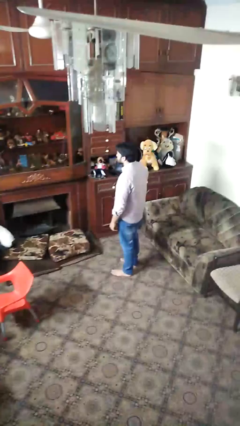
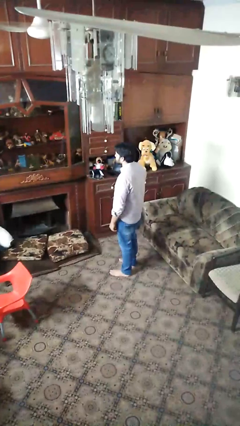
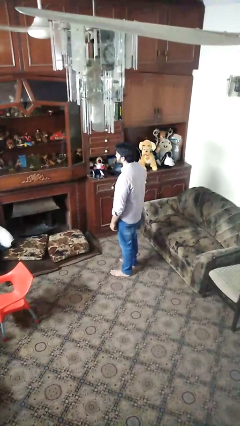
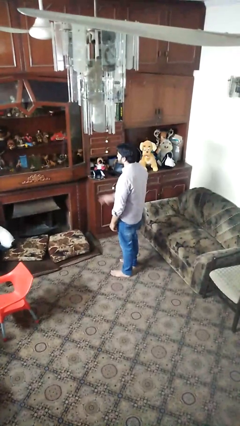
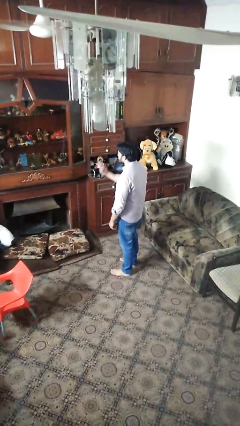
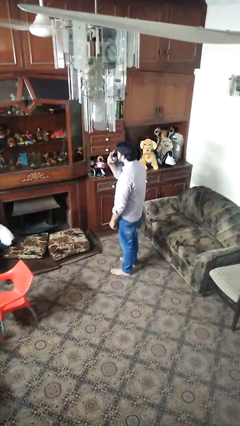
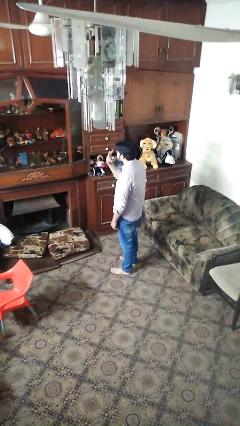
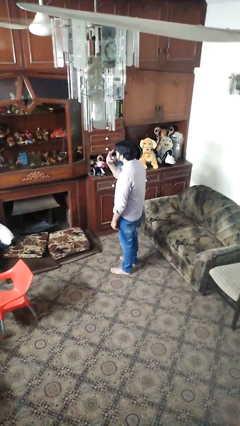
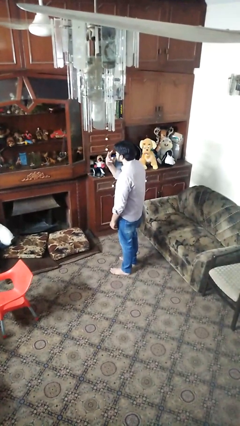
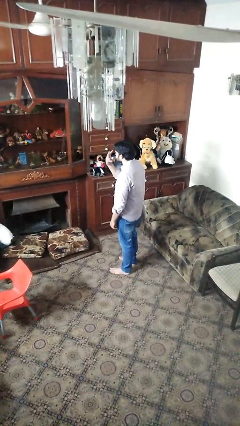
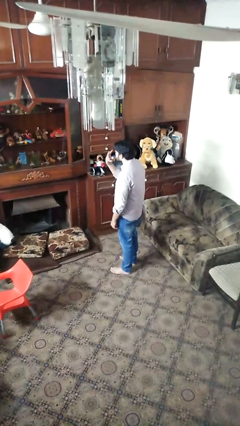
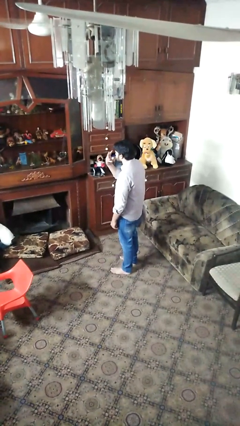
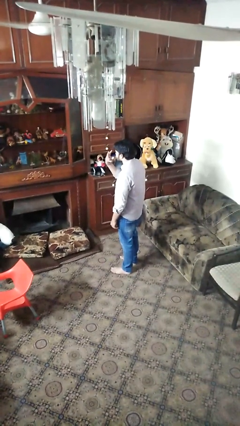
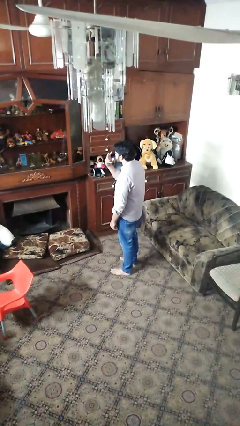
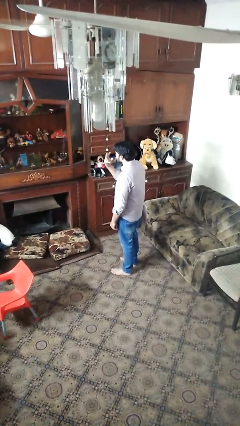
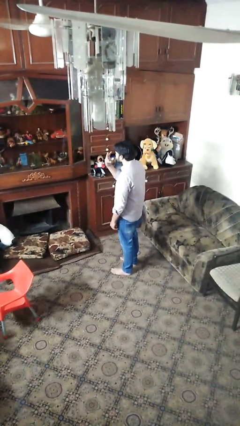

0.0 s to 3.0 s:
person gestures watch closely

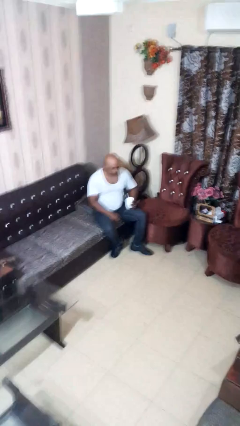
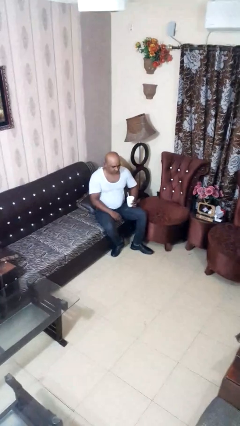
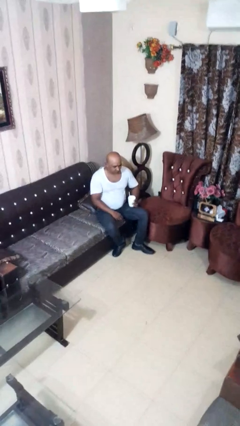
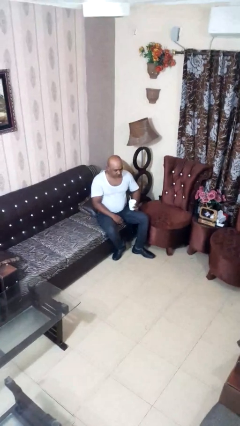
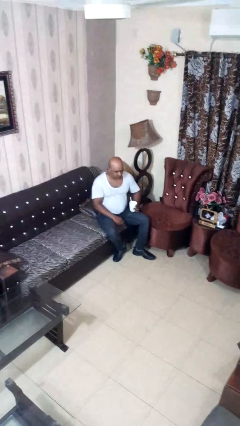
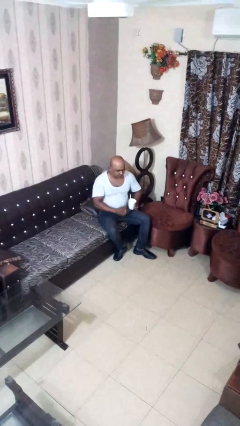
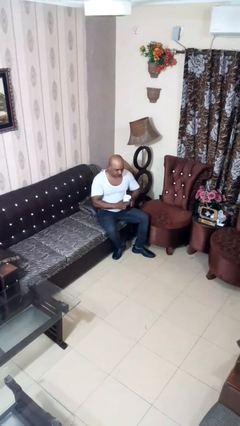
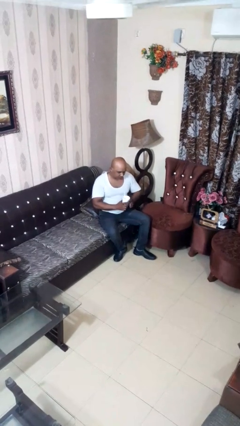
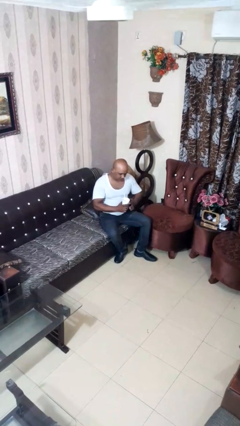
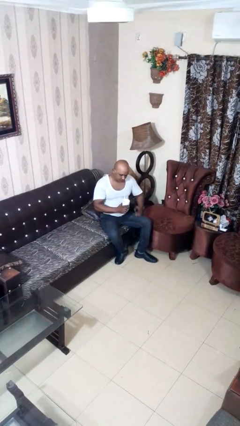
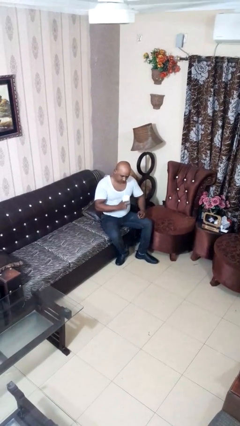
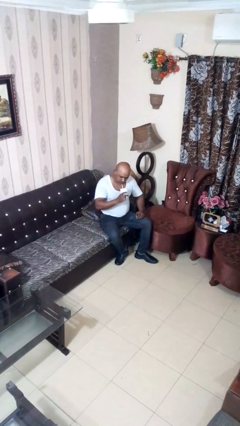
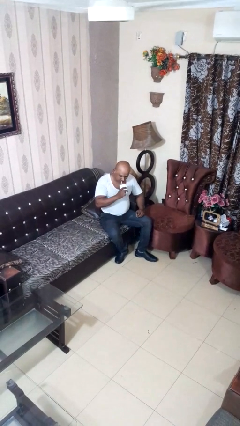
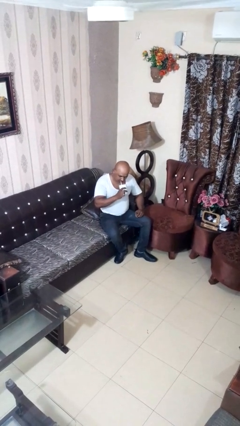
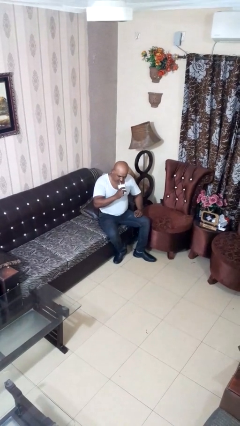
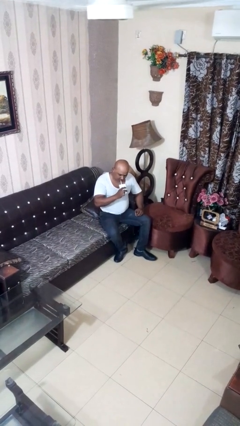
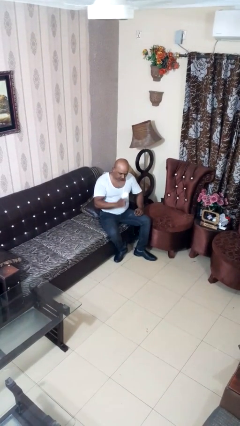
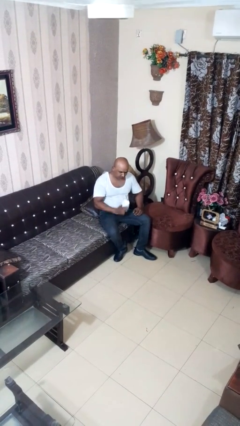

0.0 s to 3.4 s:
person drinks from straw

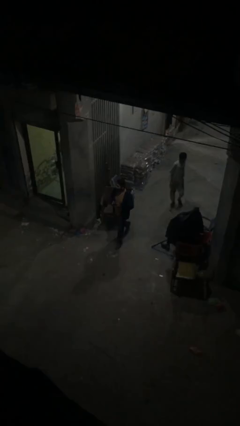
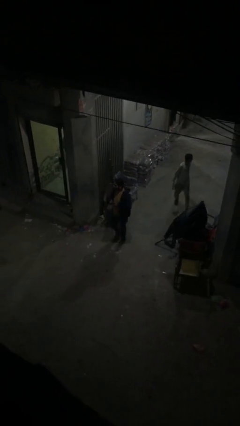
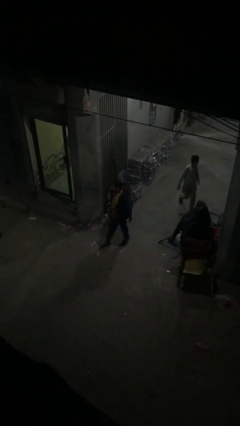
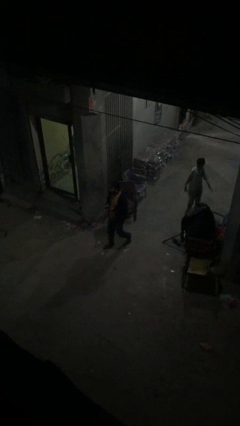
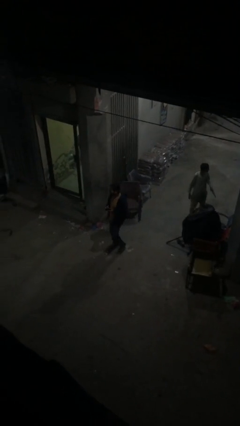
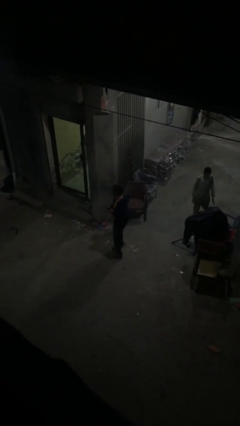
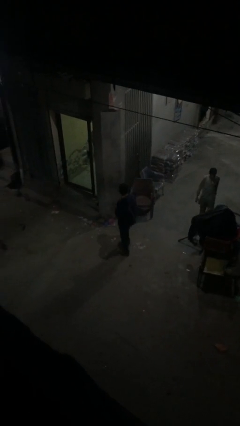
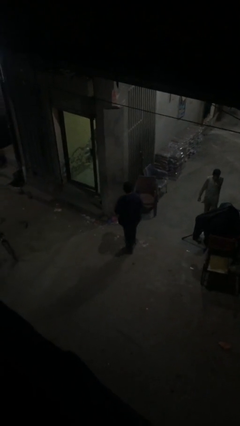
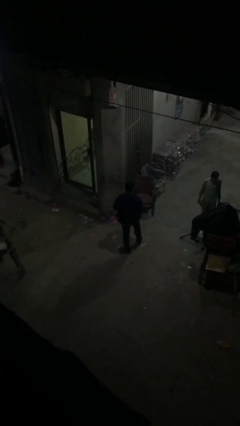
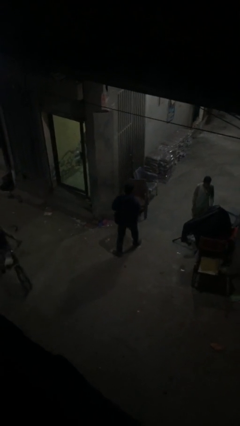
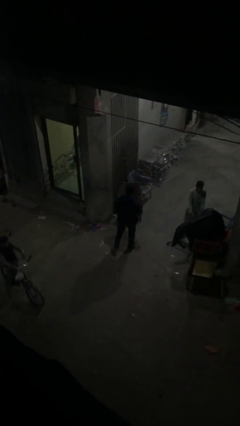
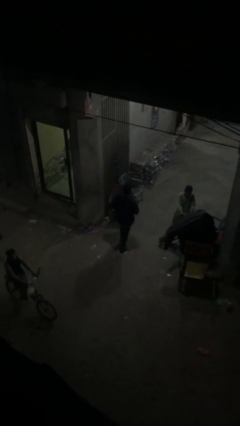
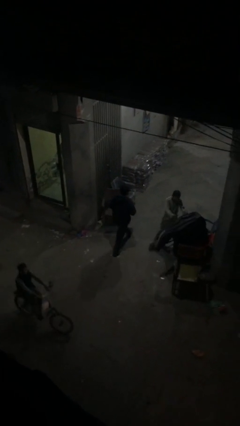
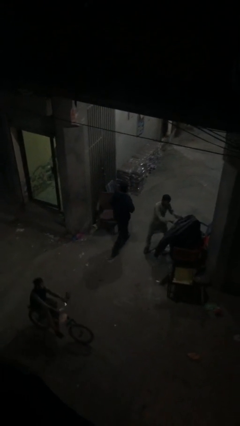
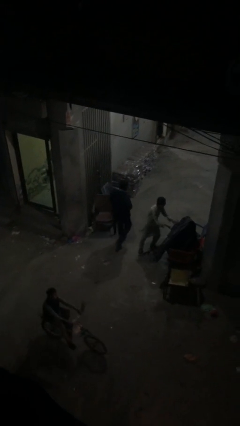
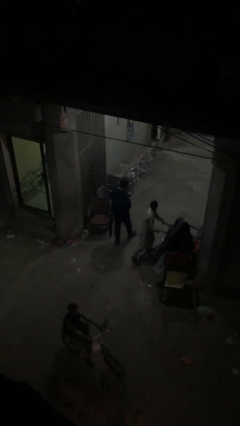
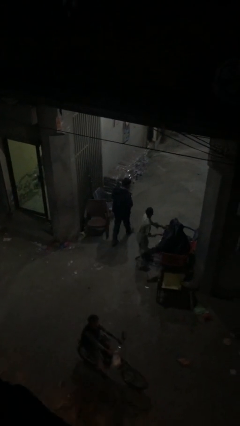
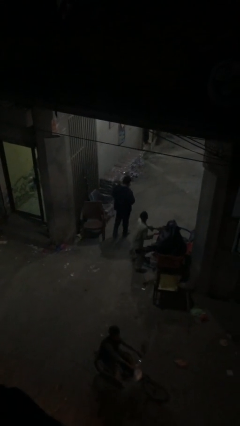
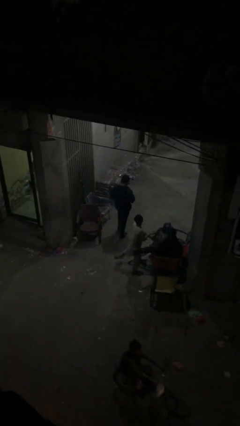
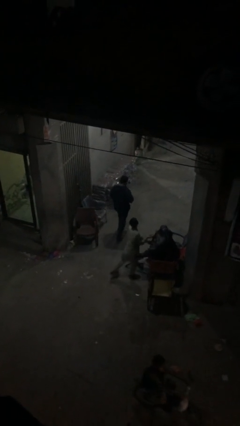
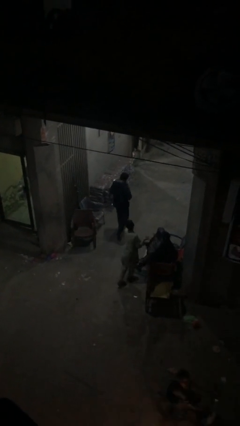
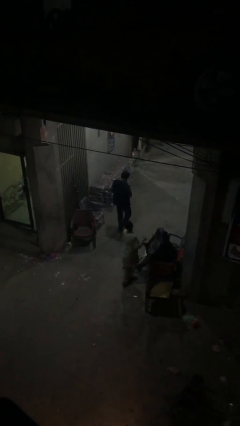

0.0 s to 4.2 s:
person enters scene through structure

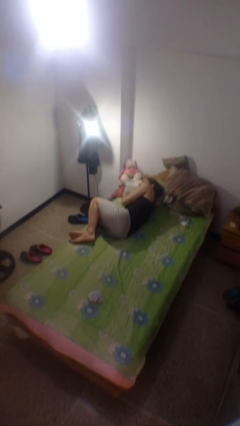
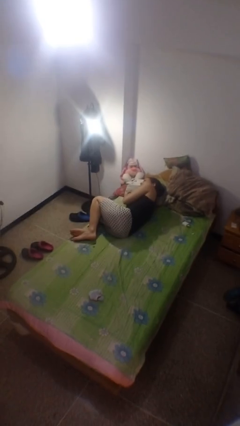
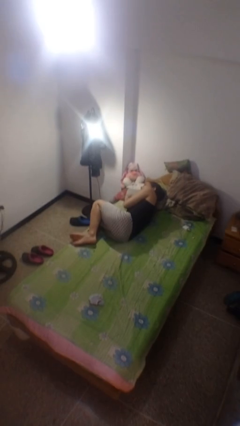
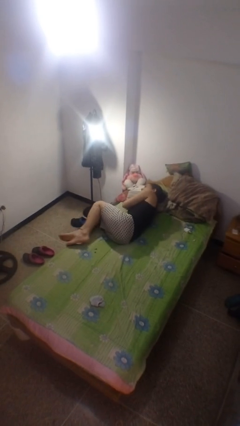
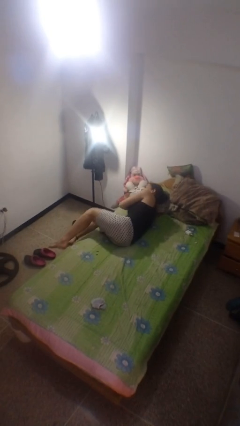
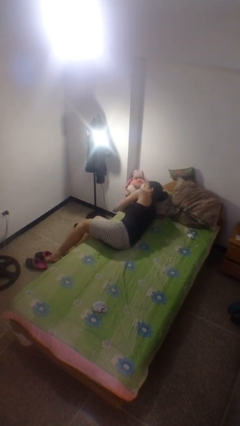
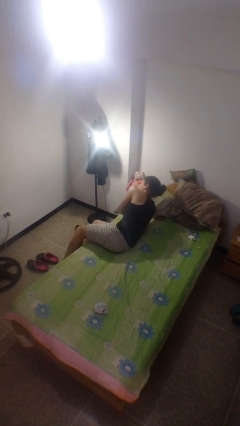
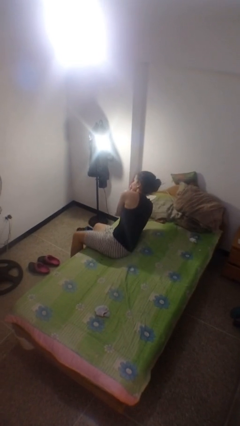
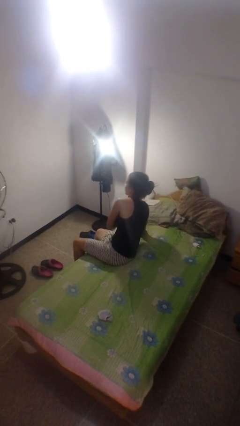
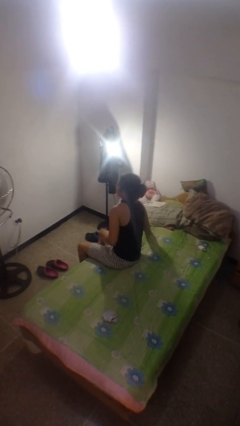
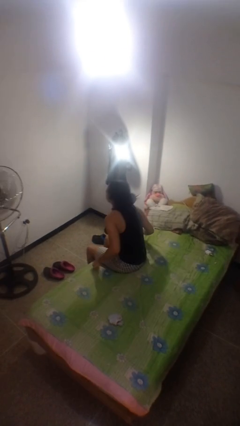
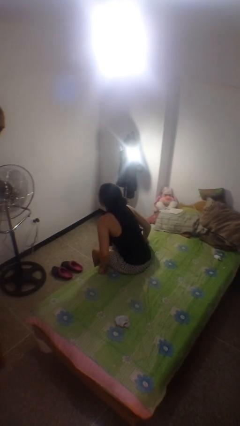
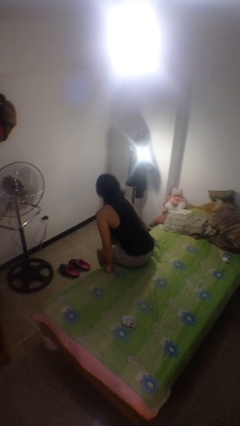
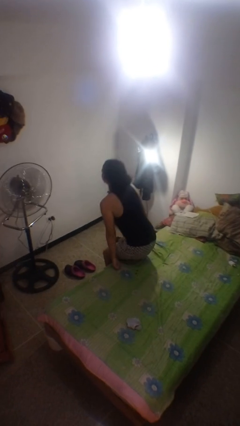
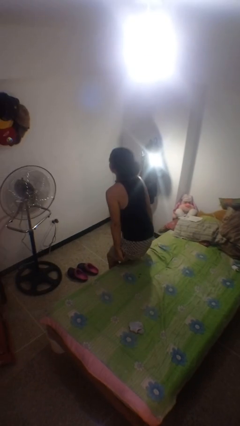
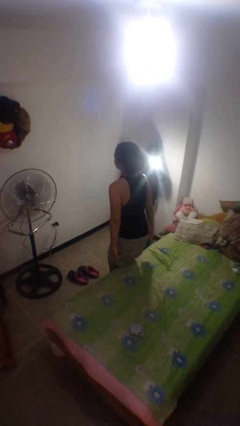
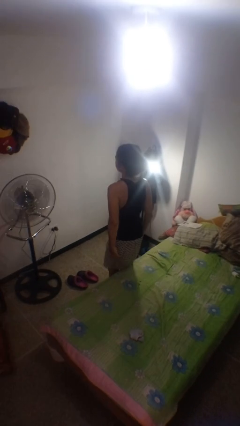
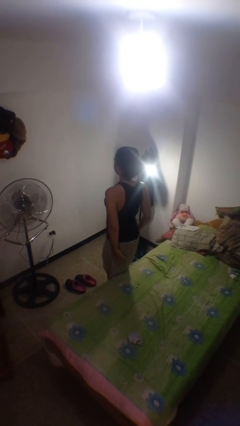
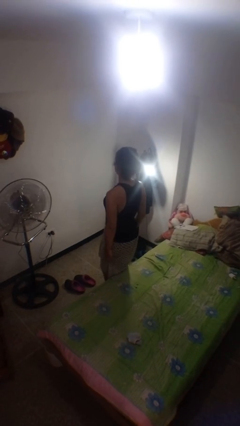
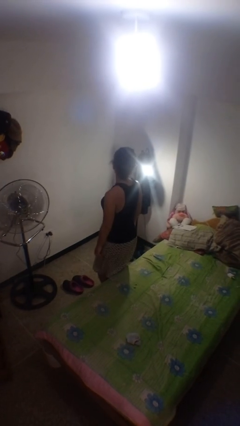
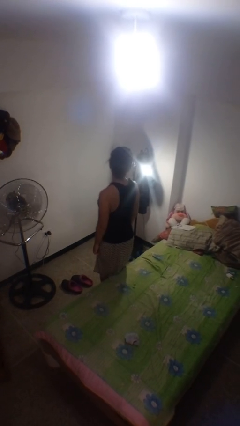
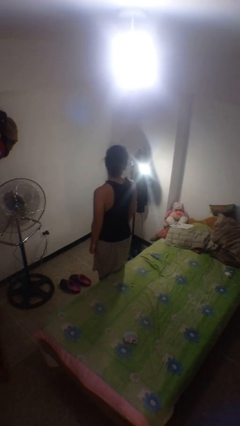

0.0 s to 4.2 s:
person stands up

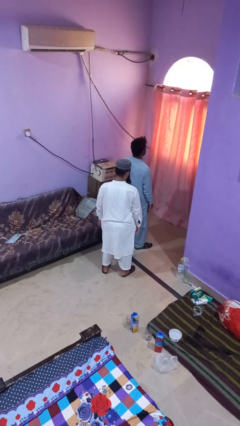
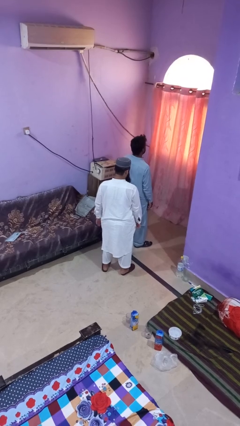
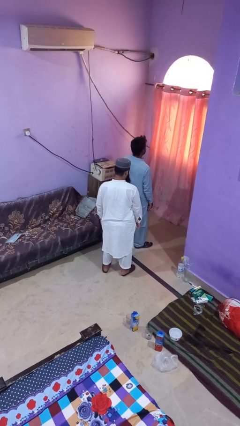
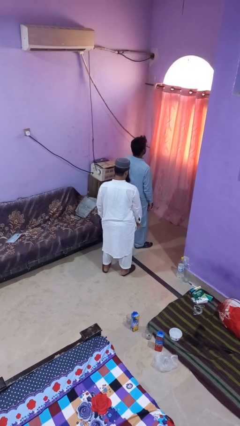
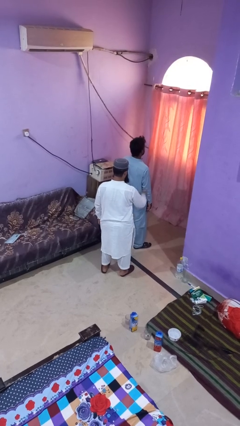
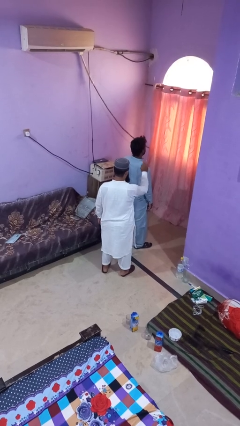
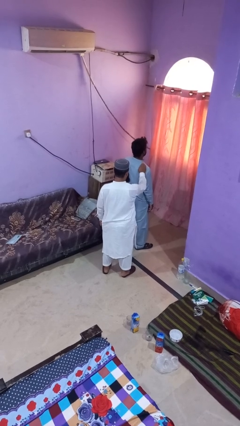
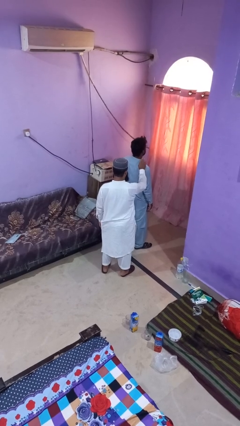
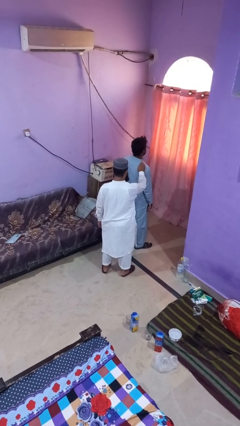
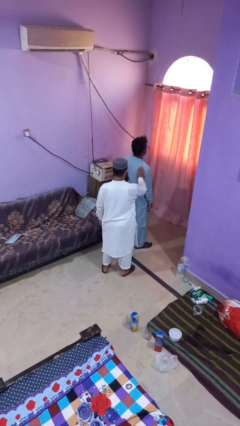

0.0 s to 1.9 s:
person pounds shoulders of person

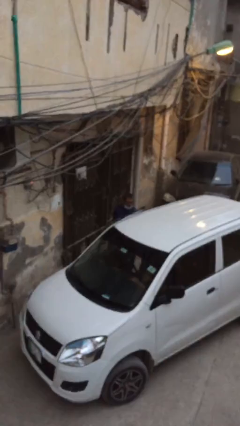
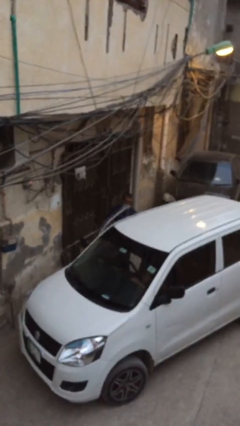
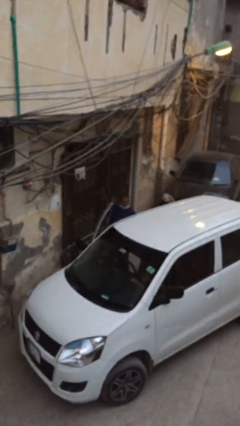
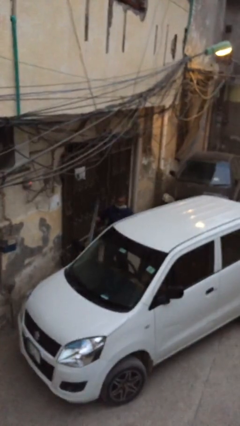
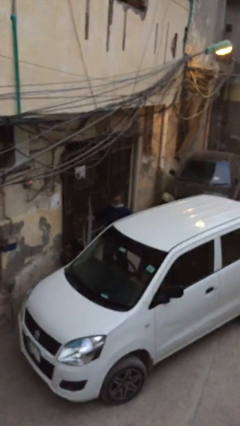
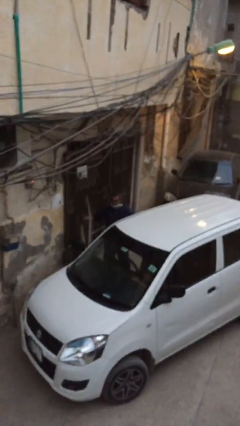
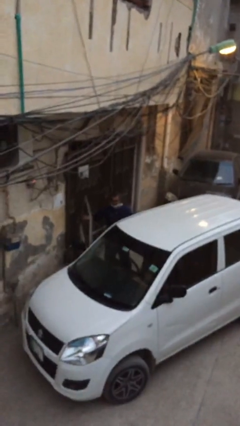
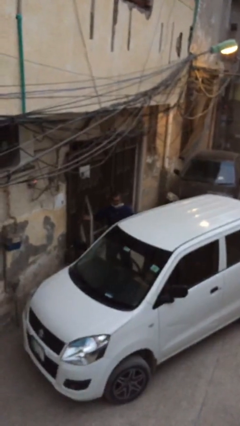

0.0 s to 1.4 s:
person opens car door
